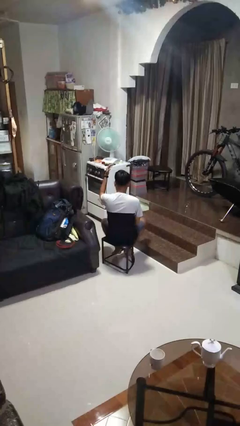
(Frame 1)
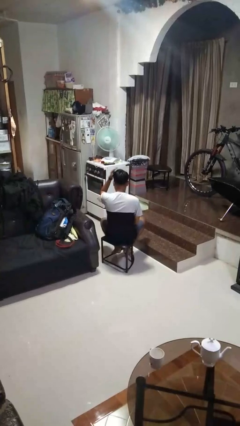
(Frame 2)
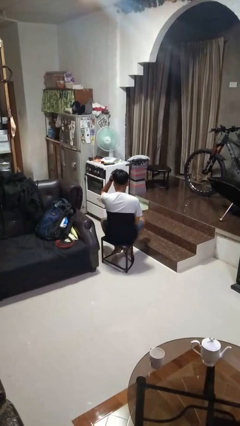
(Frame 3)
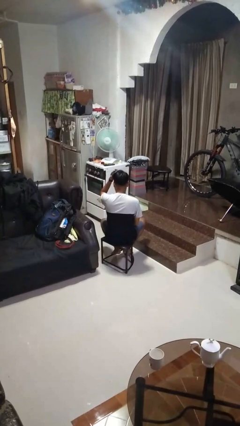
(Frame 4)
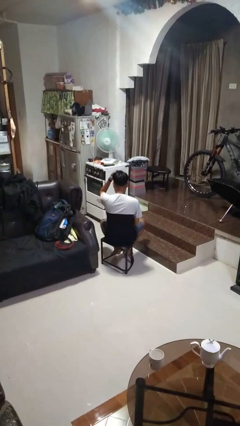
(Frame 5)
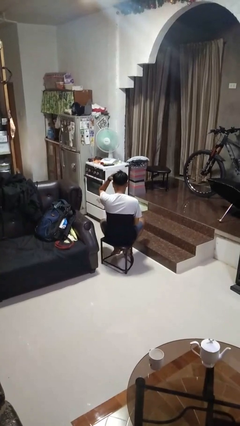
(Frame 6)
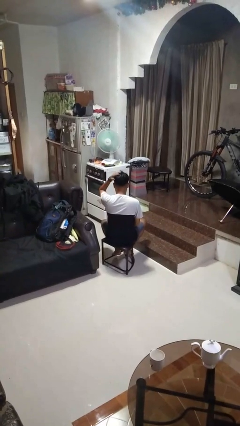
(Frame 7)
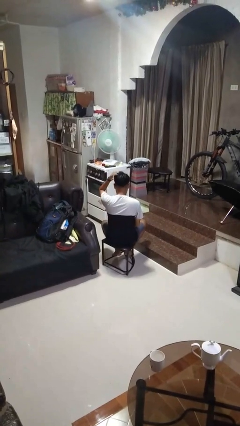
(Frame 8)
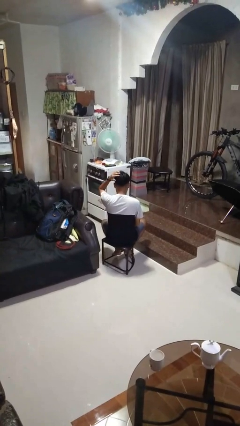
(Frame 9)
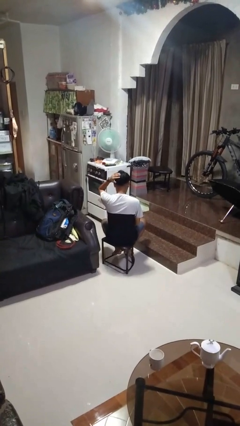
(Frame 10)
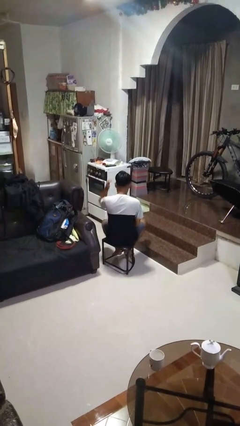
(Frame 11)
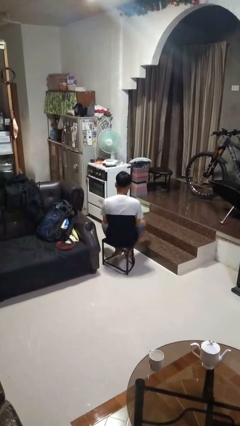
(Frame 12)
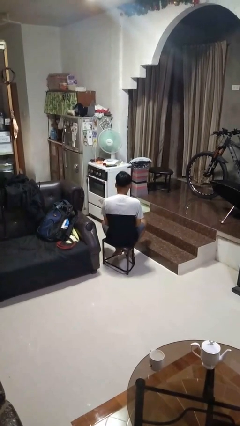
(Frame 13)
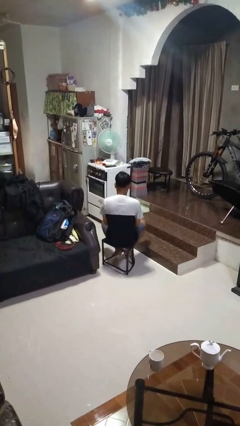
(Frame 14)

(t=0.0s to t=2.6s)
person pats head

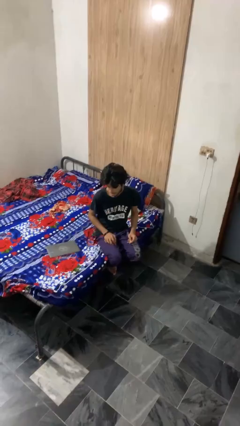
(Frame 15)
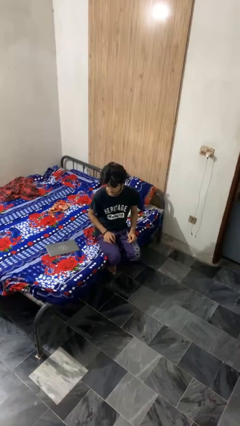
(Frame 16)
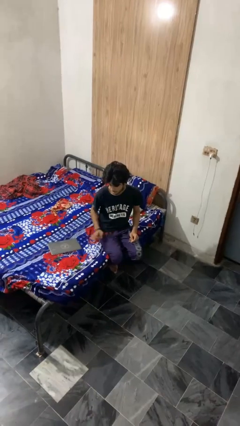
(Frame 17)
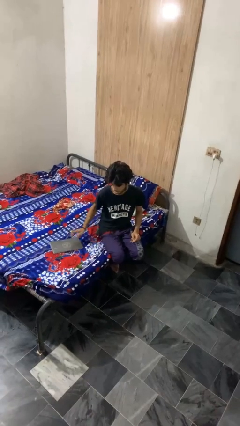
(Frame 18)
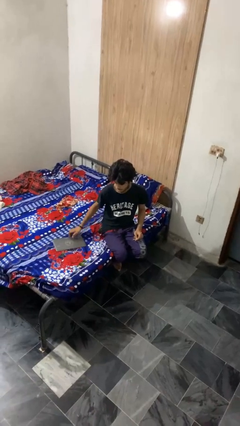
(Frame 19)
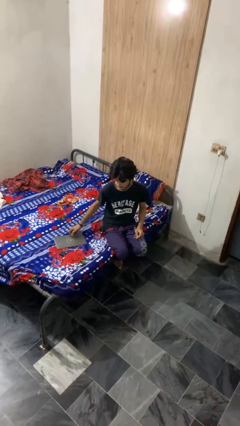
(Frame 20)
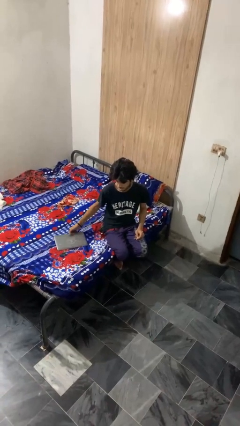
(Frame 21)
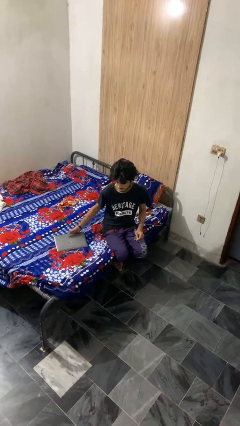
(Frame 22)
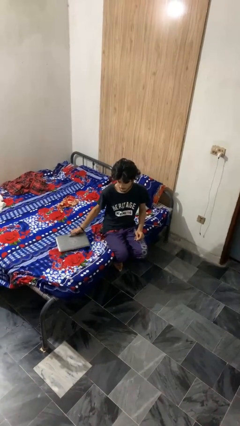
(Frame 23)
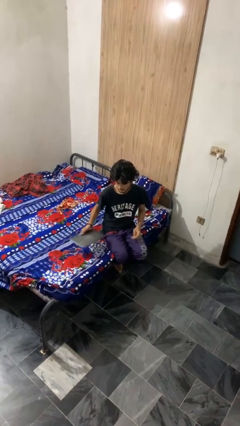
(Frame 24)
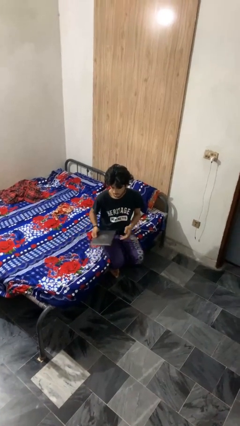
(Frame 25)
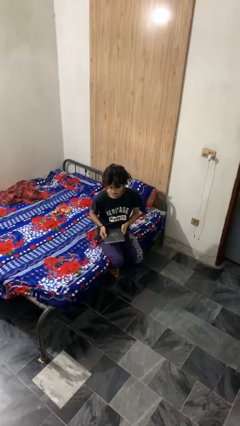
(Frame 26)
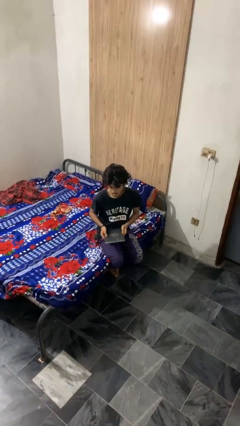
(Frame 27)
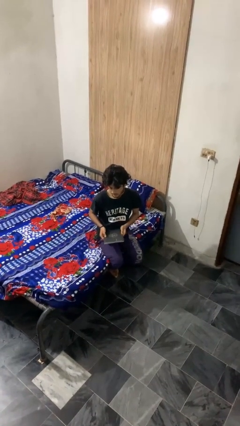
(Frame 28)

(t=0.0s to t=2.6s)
person picks up object from bed

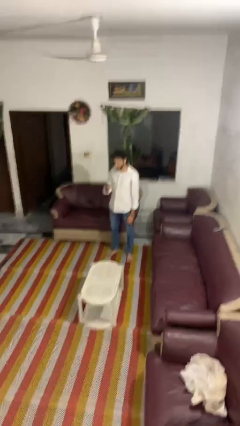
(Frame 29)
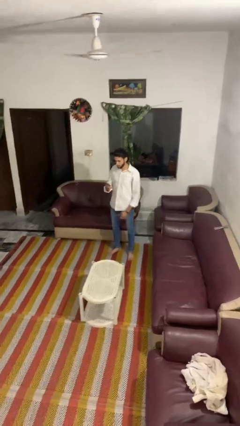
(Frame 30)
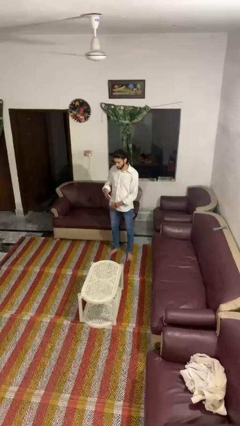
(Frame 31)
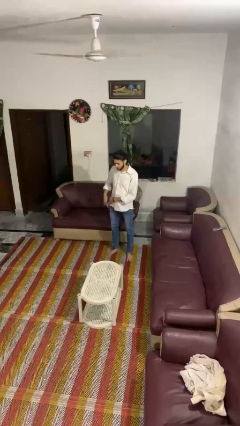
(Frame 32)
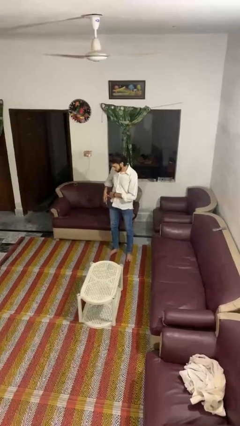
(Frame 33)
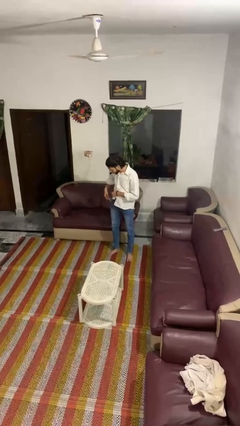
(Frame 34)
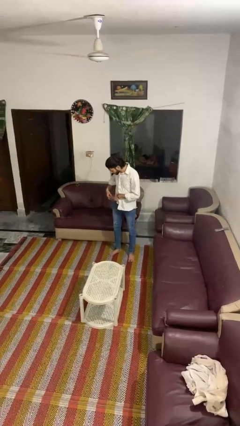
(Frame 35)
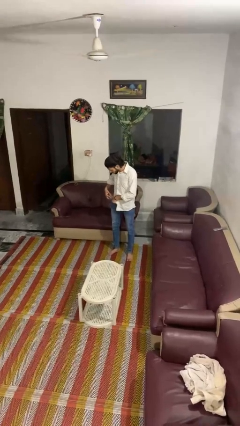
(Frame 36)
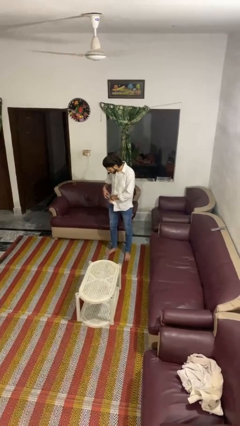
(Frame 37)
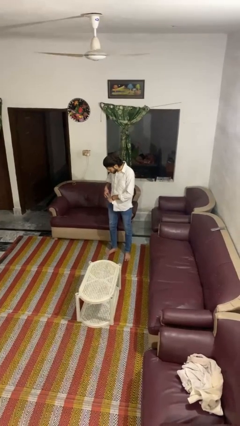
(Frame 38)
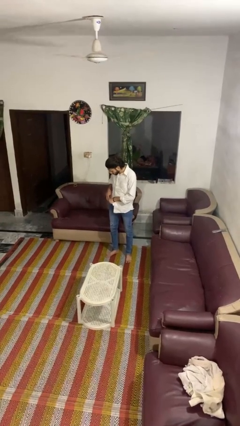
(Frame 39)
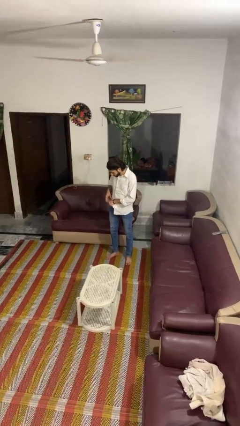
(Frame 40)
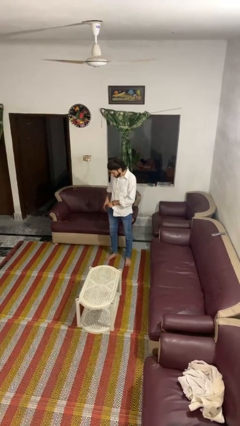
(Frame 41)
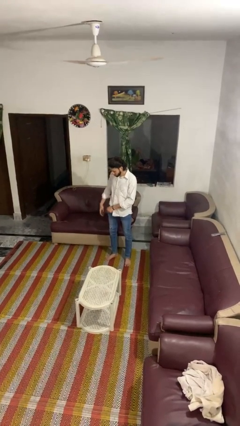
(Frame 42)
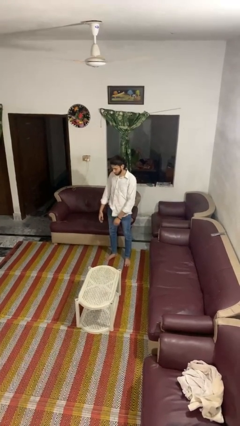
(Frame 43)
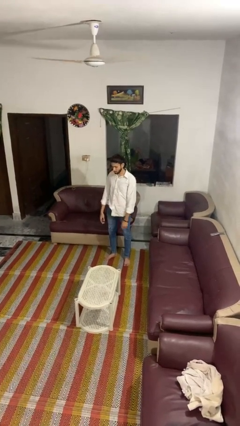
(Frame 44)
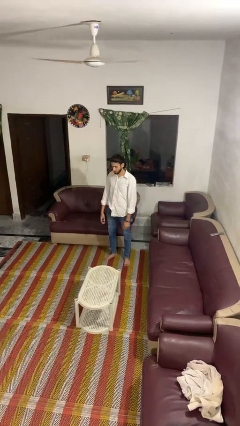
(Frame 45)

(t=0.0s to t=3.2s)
person puts phone into pocket

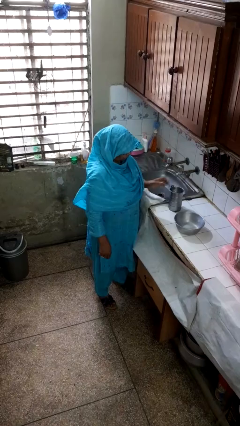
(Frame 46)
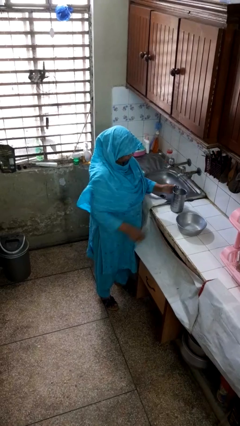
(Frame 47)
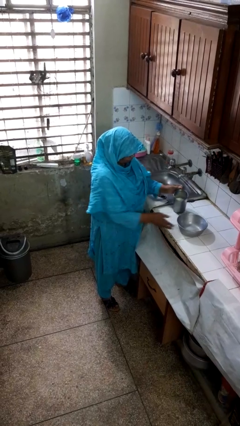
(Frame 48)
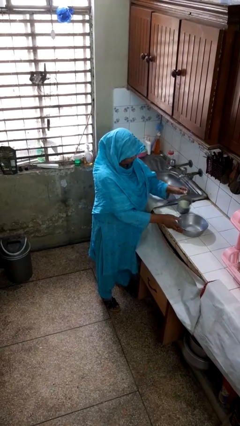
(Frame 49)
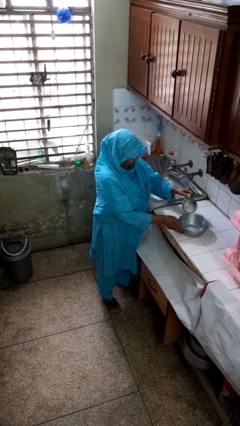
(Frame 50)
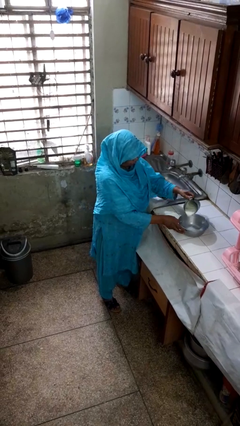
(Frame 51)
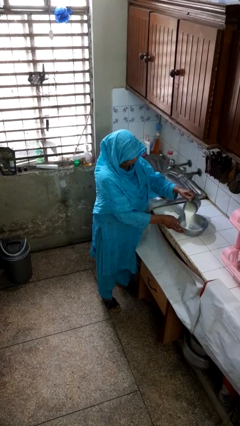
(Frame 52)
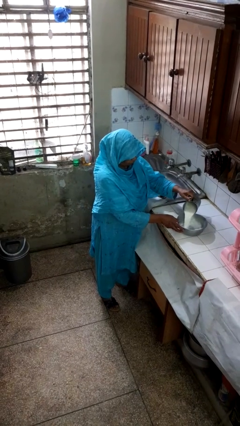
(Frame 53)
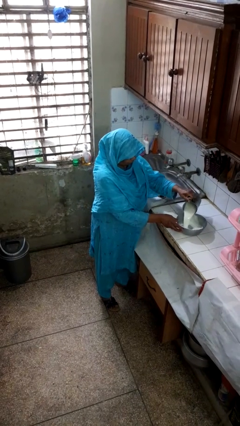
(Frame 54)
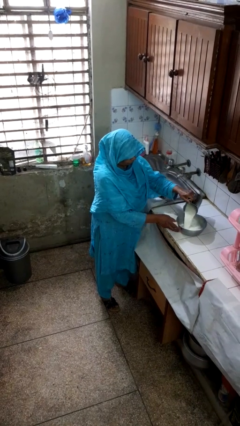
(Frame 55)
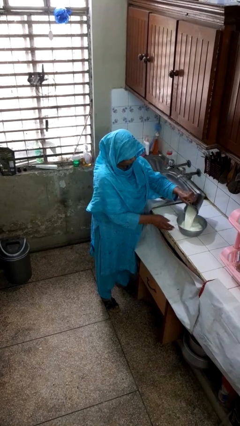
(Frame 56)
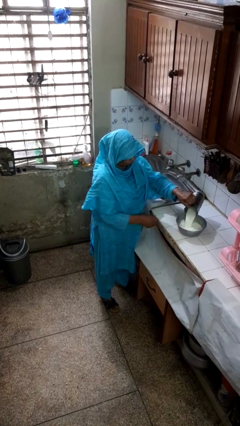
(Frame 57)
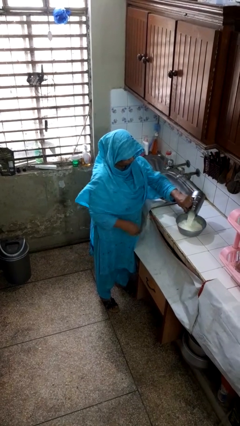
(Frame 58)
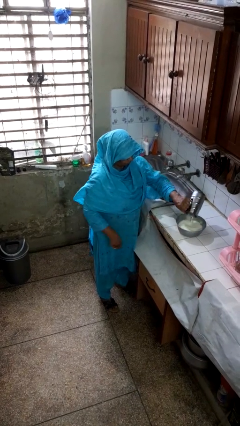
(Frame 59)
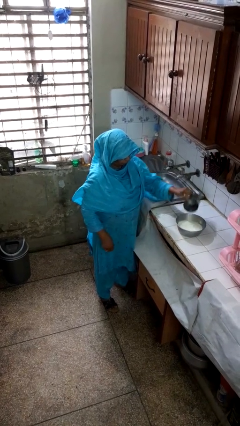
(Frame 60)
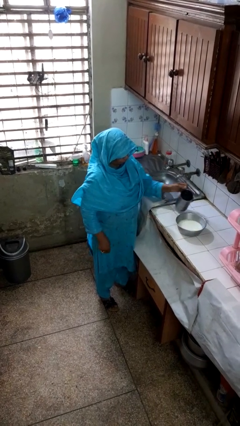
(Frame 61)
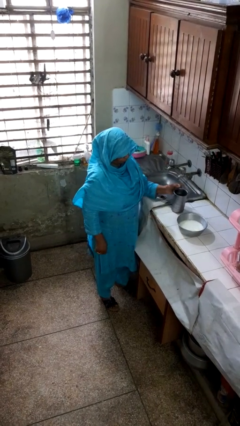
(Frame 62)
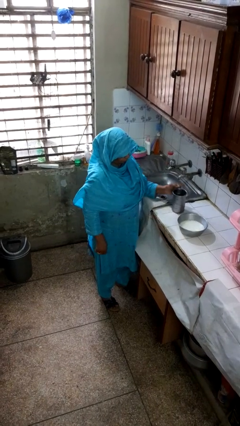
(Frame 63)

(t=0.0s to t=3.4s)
person pours into bowl

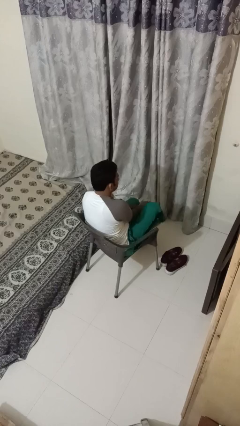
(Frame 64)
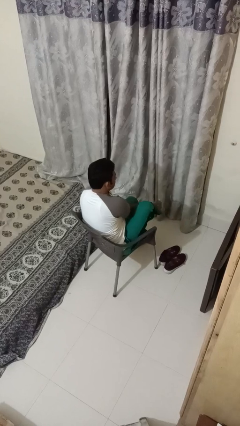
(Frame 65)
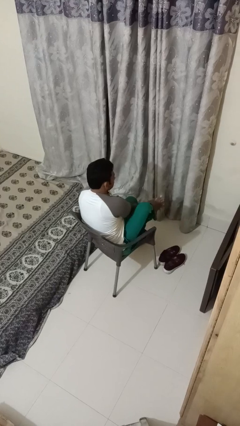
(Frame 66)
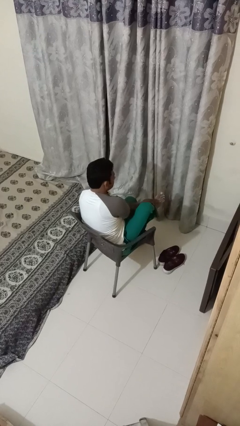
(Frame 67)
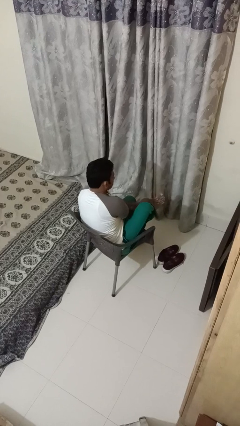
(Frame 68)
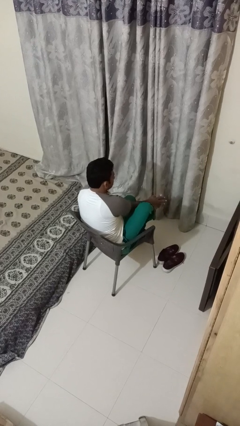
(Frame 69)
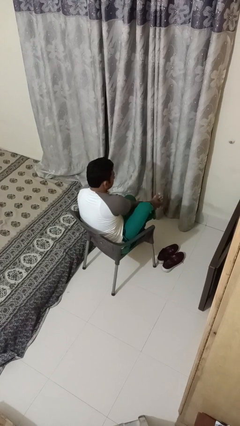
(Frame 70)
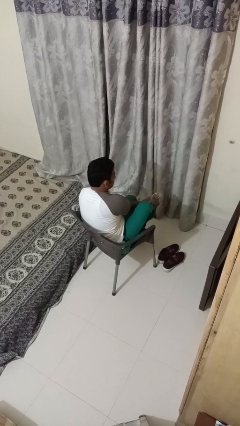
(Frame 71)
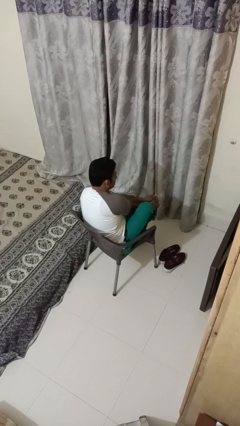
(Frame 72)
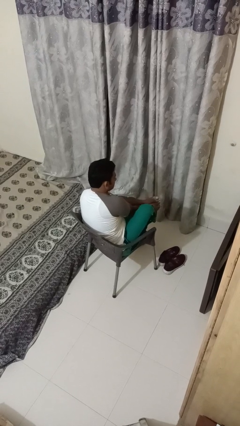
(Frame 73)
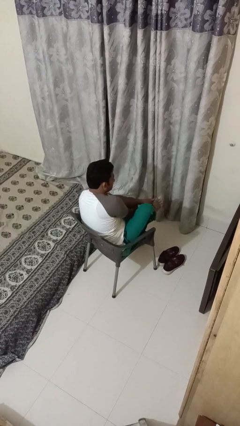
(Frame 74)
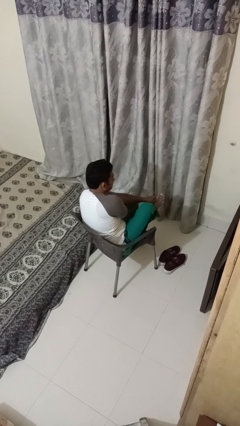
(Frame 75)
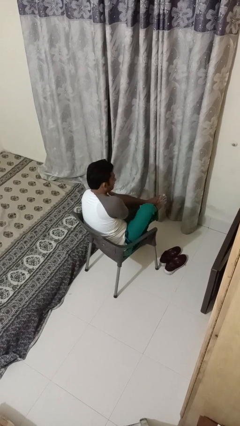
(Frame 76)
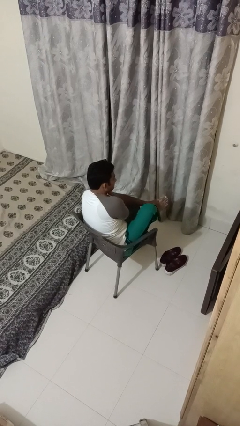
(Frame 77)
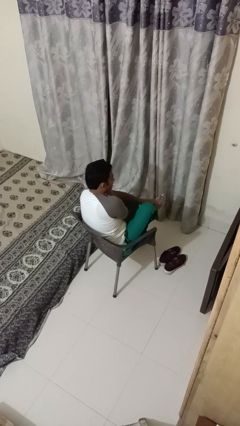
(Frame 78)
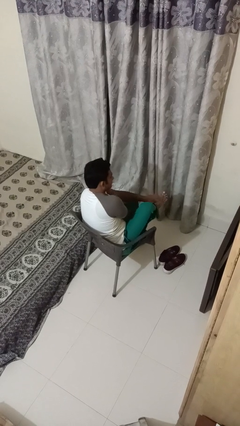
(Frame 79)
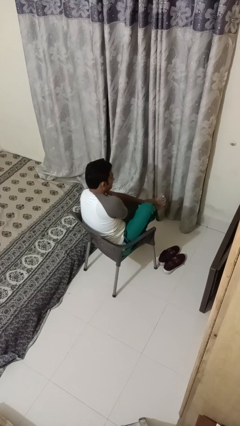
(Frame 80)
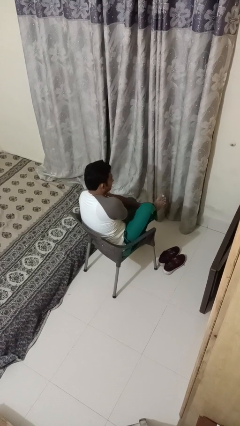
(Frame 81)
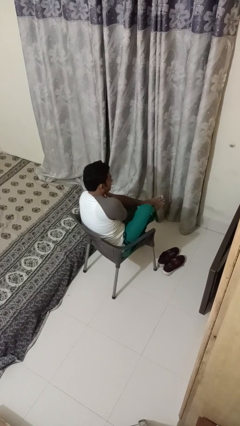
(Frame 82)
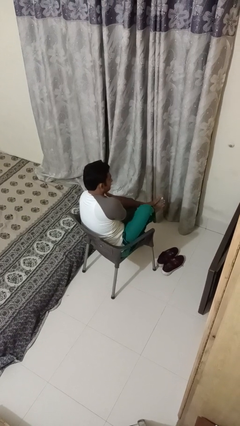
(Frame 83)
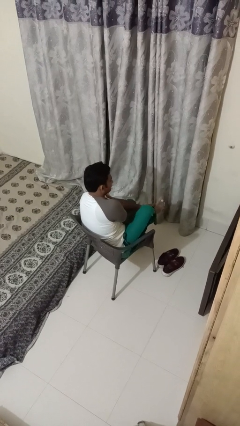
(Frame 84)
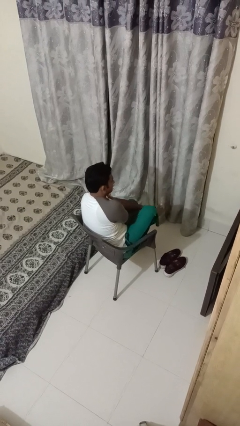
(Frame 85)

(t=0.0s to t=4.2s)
person rubs foot

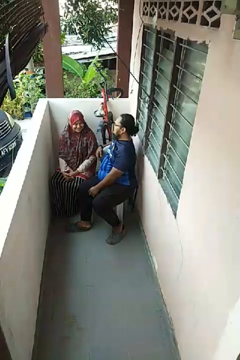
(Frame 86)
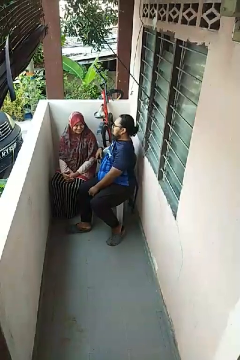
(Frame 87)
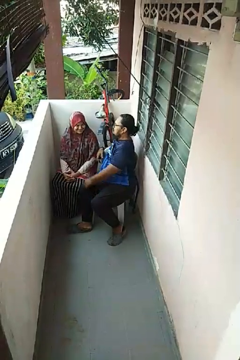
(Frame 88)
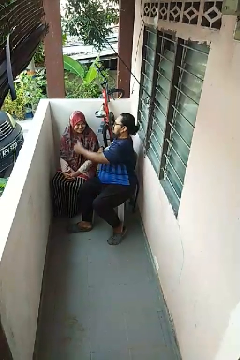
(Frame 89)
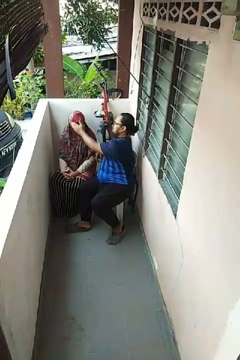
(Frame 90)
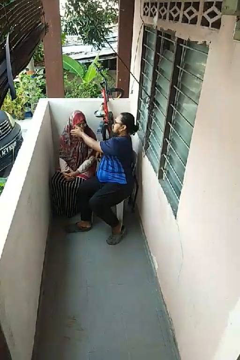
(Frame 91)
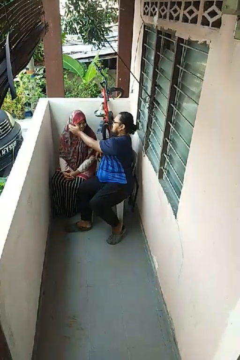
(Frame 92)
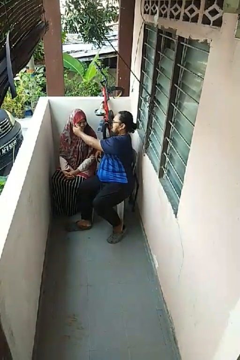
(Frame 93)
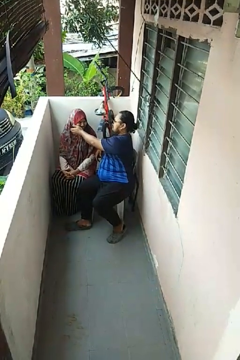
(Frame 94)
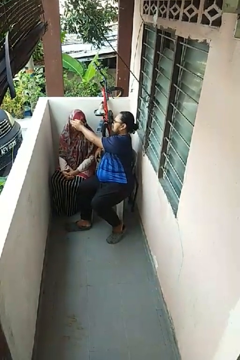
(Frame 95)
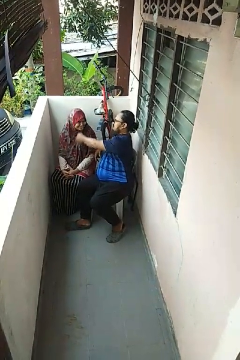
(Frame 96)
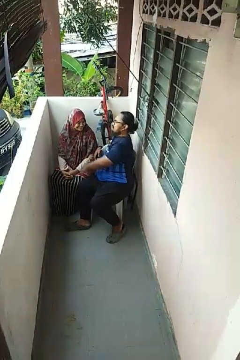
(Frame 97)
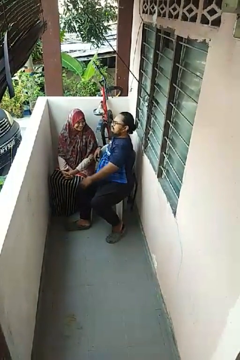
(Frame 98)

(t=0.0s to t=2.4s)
person touches face of person
